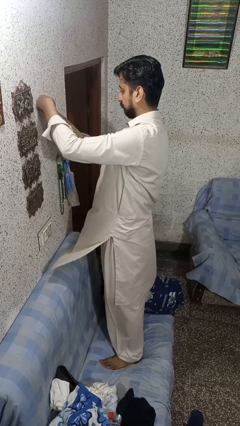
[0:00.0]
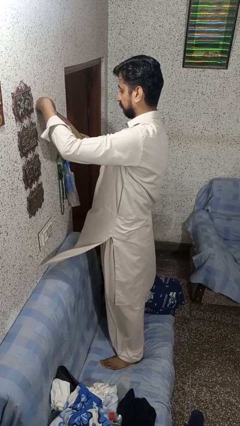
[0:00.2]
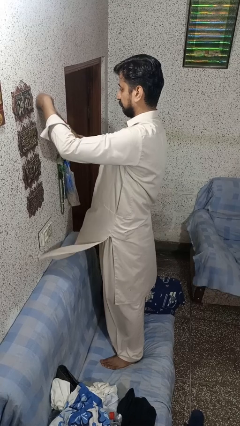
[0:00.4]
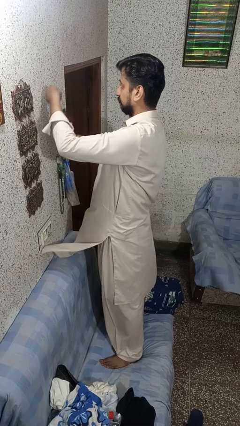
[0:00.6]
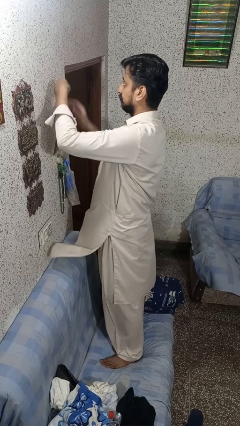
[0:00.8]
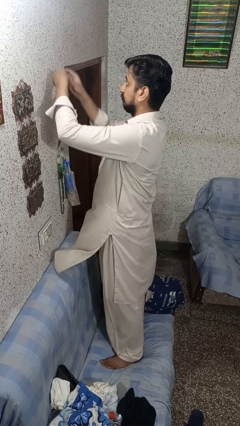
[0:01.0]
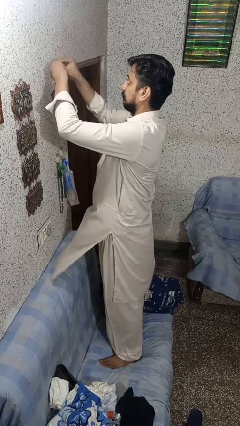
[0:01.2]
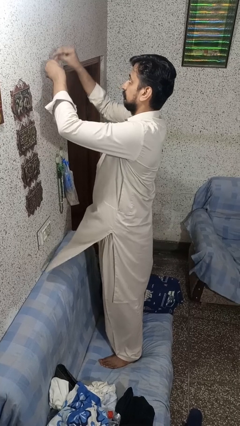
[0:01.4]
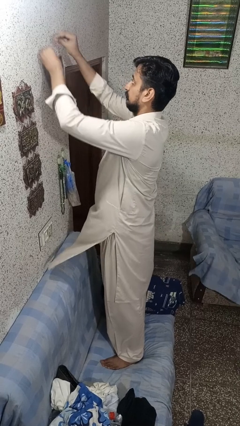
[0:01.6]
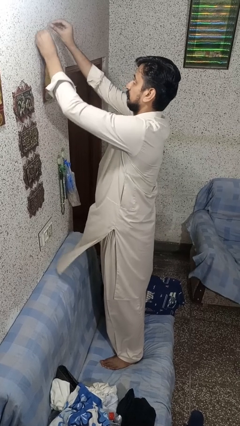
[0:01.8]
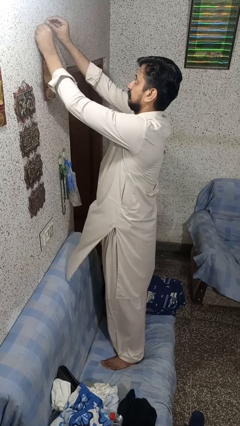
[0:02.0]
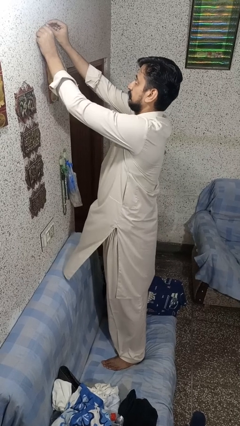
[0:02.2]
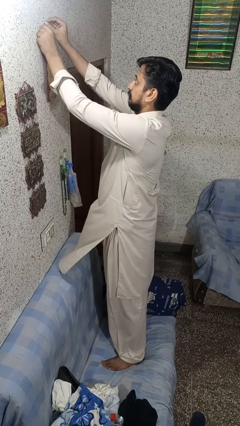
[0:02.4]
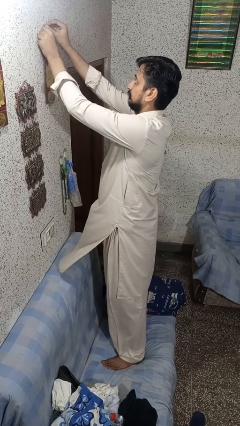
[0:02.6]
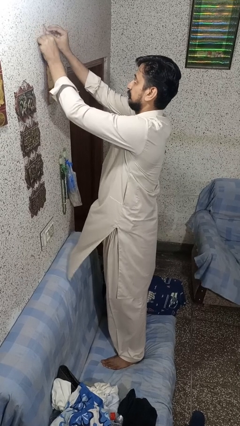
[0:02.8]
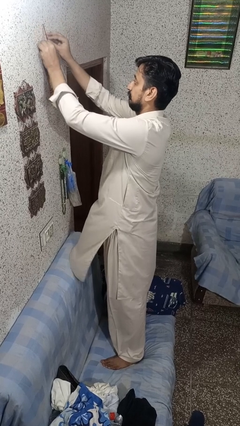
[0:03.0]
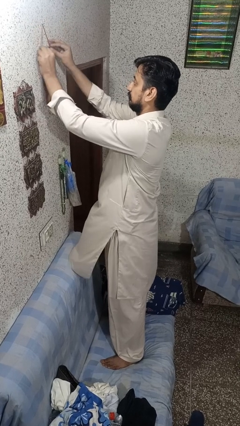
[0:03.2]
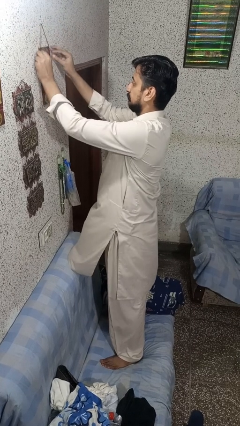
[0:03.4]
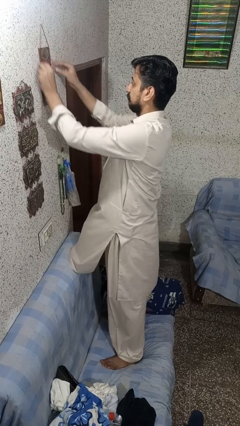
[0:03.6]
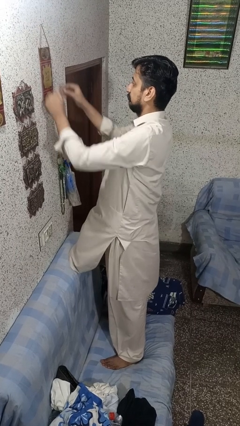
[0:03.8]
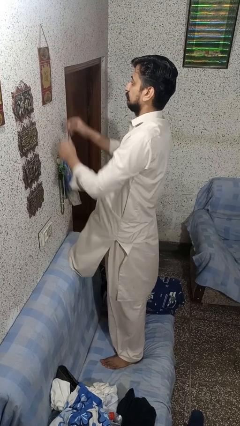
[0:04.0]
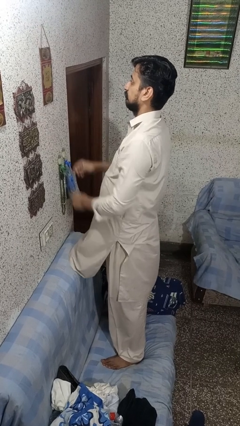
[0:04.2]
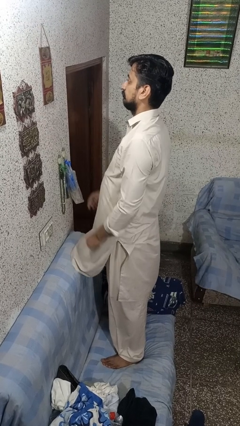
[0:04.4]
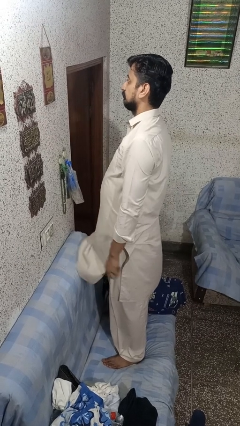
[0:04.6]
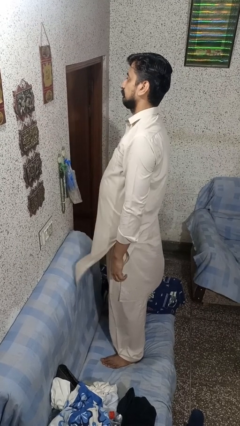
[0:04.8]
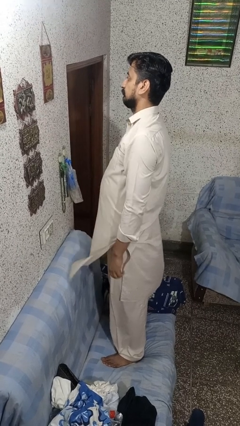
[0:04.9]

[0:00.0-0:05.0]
person puts up picture frame

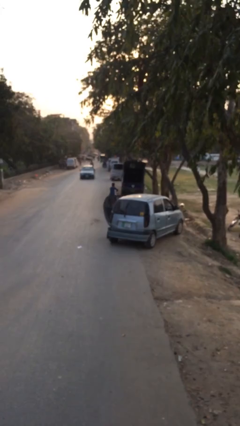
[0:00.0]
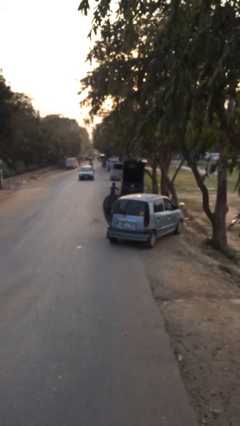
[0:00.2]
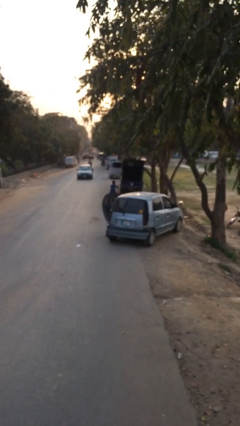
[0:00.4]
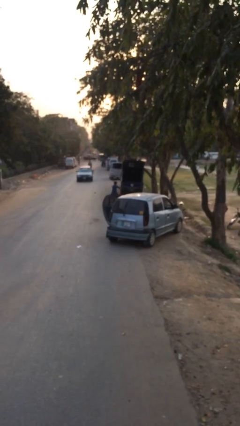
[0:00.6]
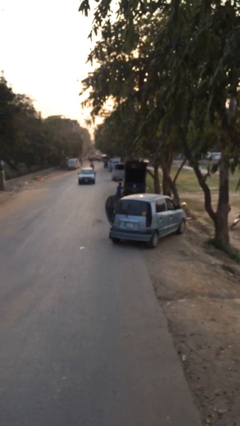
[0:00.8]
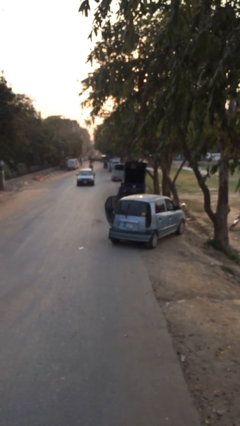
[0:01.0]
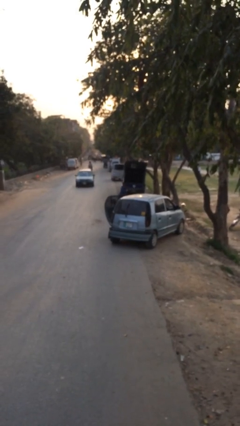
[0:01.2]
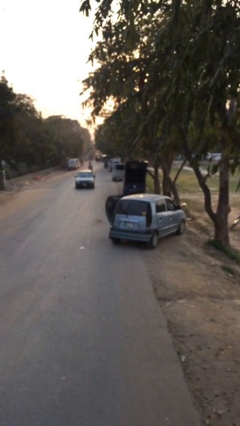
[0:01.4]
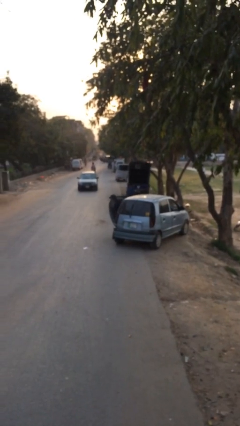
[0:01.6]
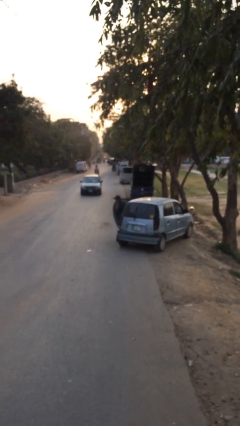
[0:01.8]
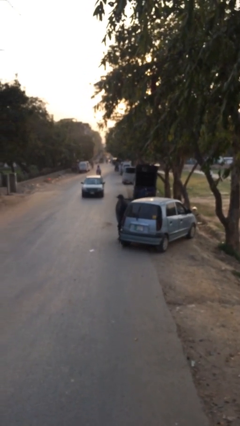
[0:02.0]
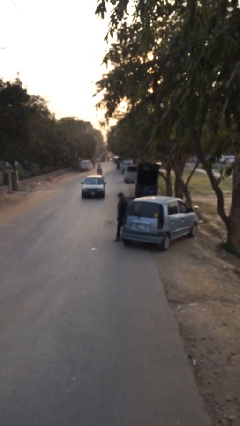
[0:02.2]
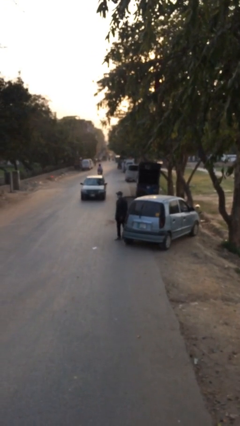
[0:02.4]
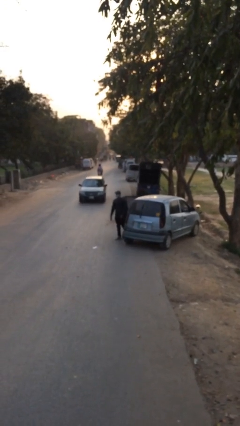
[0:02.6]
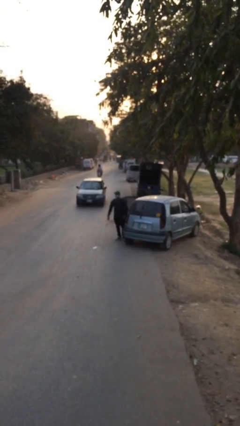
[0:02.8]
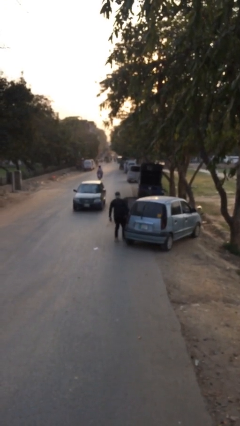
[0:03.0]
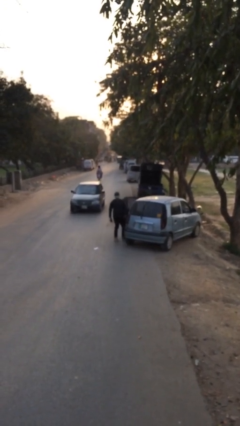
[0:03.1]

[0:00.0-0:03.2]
person exits car

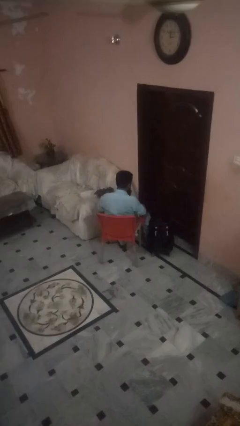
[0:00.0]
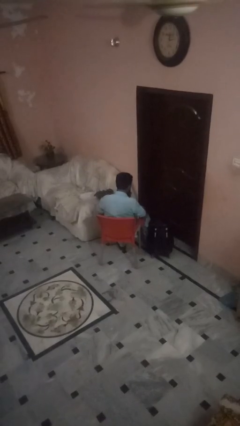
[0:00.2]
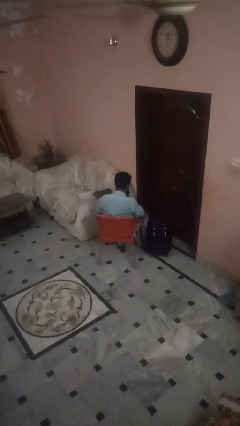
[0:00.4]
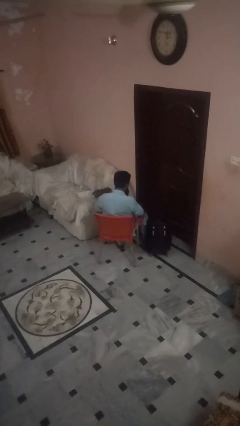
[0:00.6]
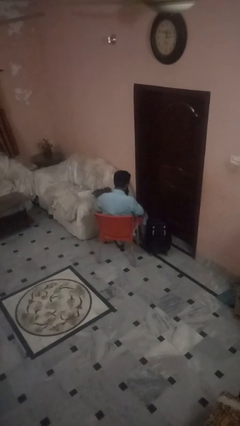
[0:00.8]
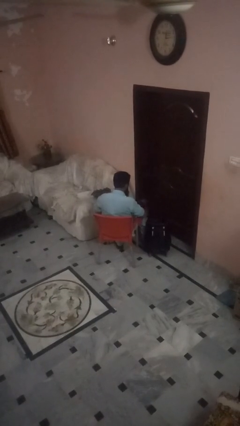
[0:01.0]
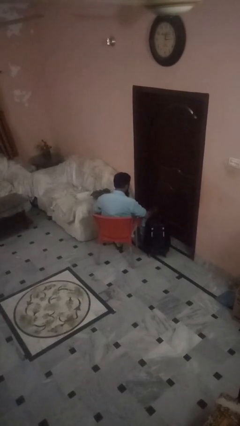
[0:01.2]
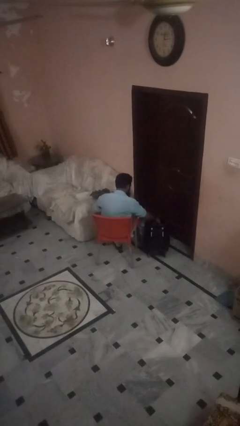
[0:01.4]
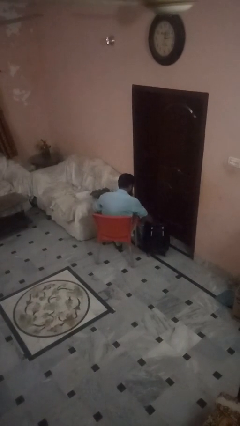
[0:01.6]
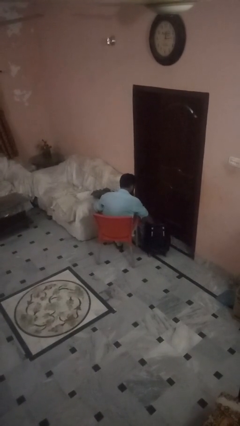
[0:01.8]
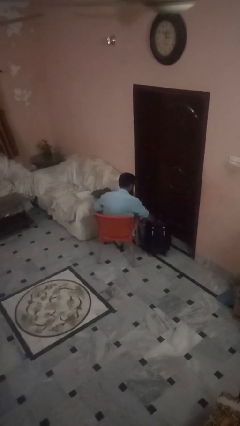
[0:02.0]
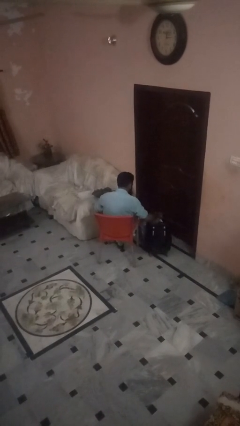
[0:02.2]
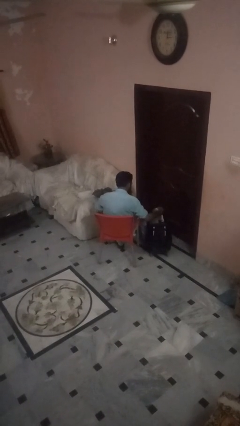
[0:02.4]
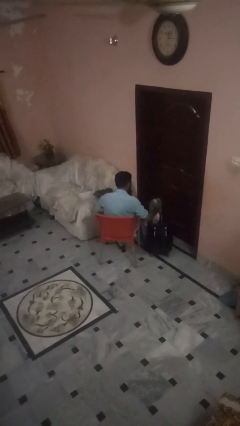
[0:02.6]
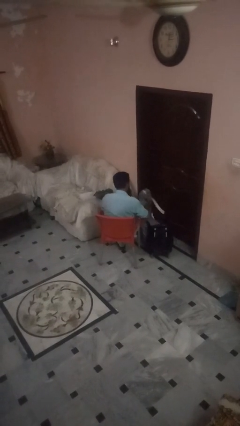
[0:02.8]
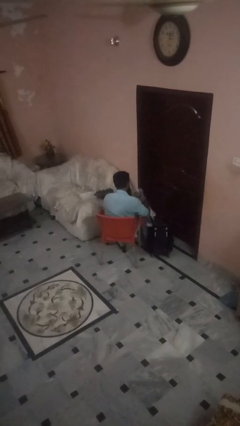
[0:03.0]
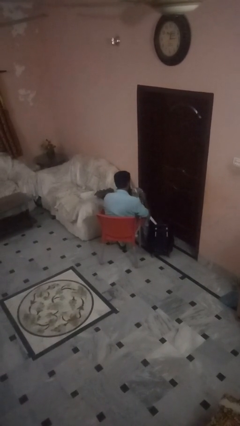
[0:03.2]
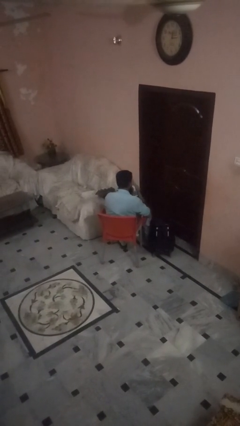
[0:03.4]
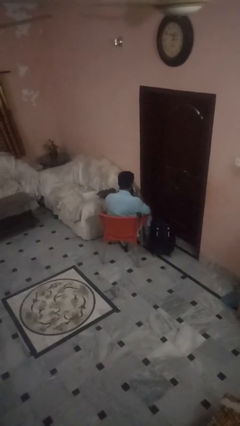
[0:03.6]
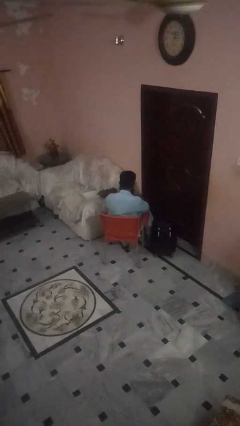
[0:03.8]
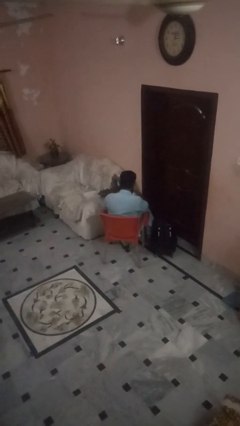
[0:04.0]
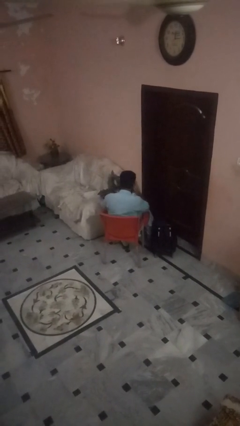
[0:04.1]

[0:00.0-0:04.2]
person unloads clothes from suitcase

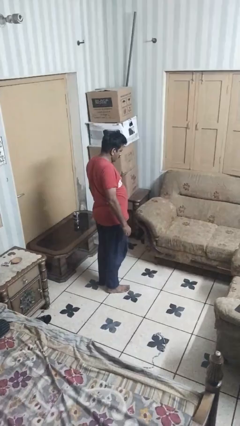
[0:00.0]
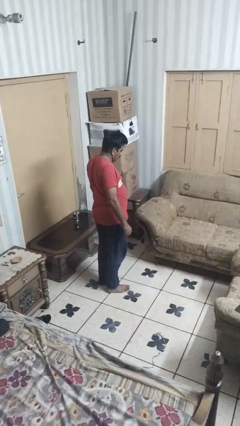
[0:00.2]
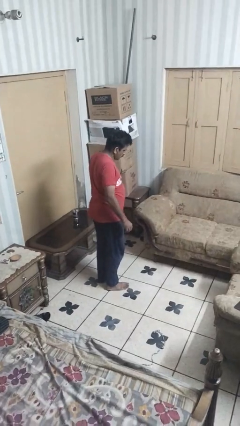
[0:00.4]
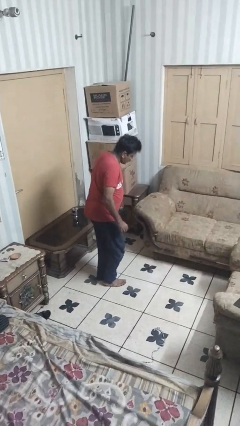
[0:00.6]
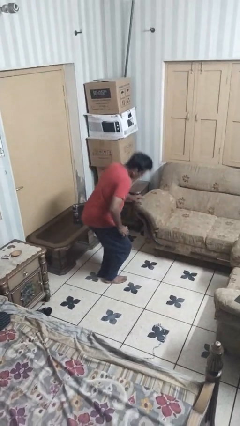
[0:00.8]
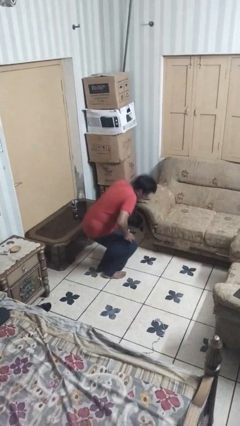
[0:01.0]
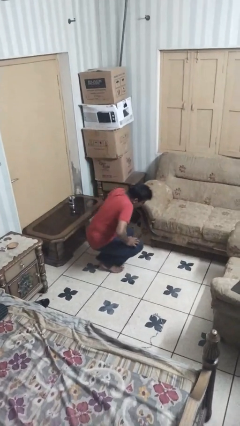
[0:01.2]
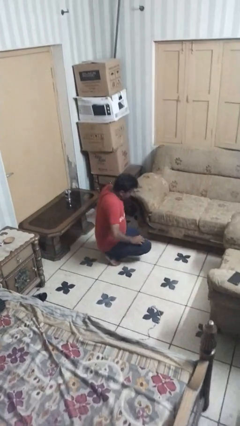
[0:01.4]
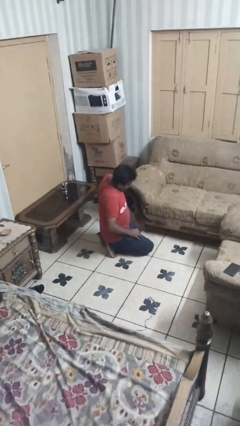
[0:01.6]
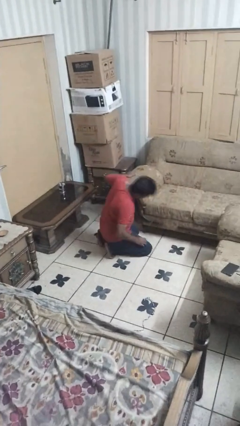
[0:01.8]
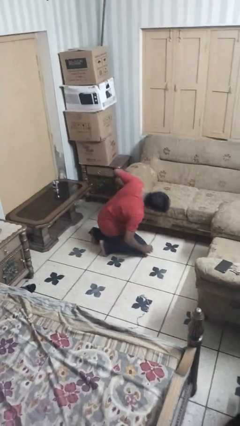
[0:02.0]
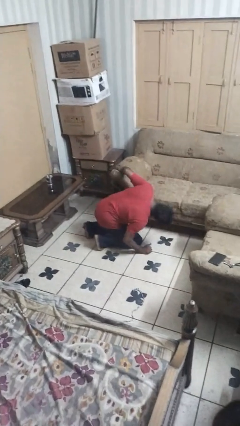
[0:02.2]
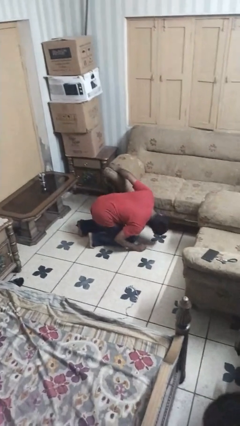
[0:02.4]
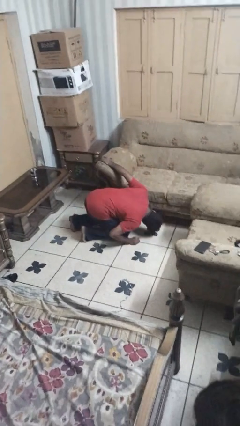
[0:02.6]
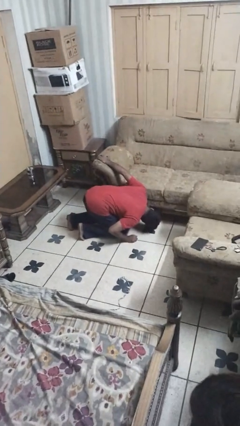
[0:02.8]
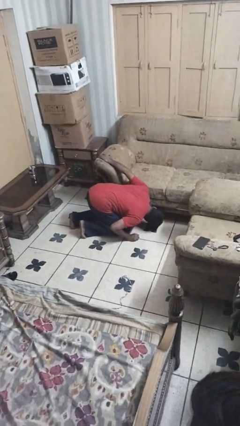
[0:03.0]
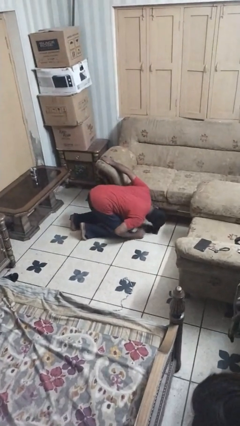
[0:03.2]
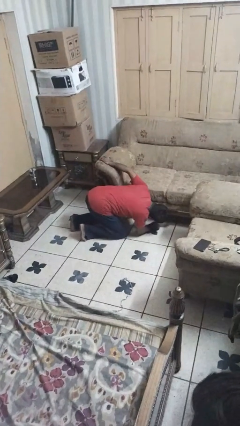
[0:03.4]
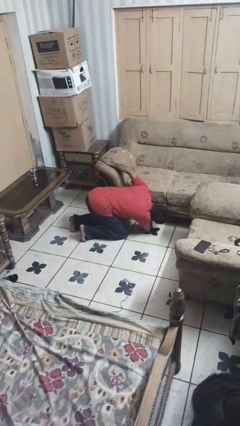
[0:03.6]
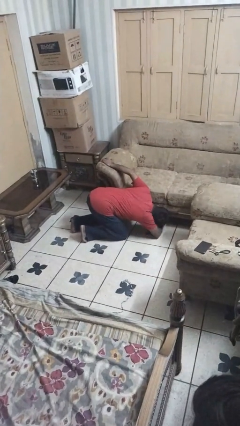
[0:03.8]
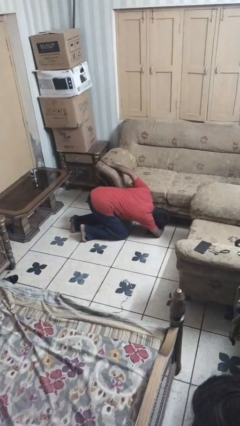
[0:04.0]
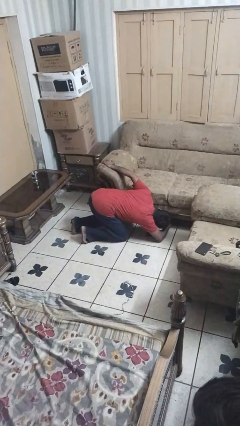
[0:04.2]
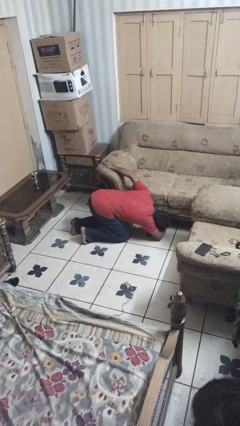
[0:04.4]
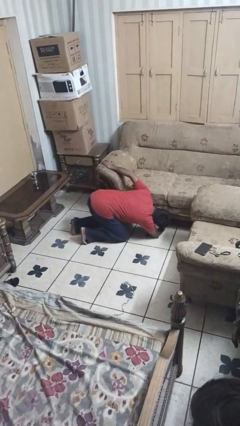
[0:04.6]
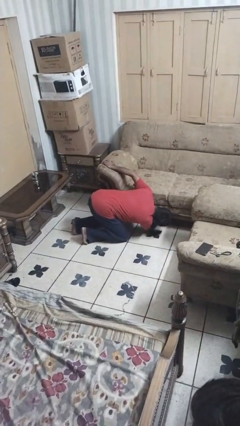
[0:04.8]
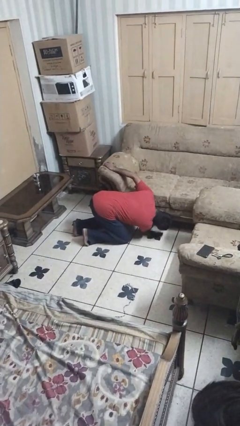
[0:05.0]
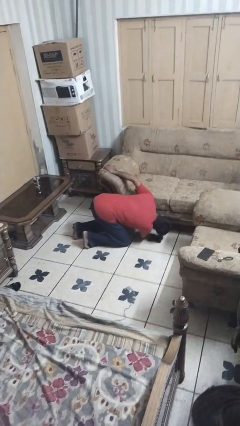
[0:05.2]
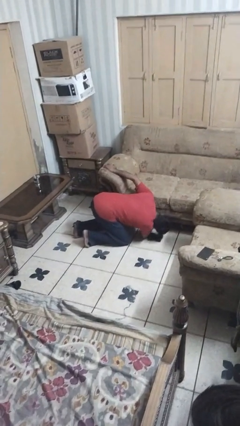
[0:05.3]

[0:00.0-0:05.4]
person searches under couch

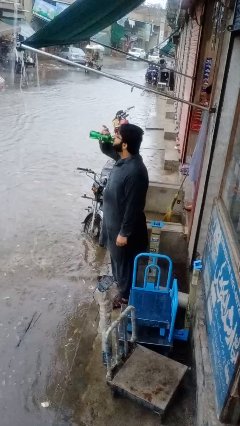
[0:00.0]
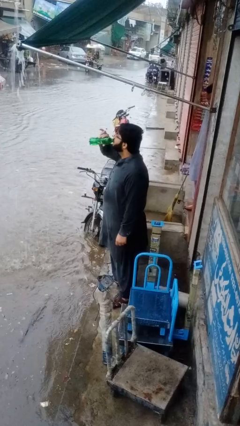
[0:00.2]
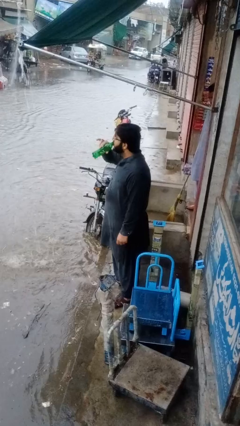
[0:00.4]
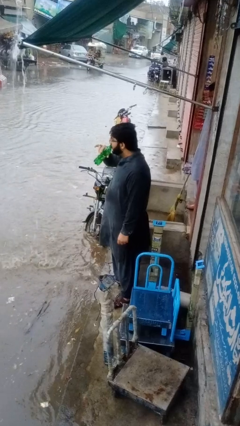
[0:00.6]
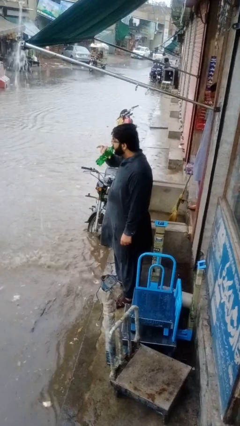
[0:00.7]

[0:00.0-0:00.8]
person drinks from bottle
